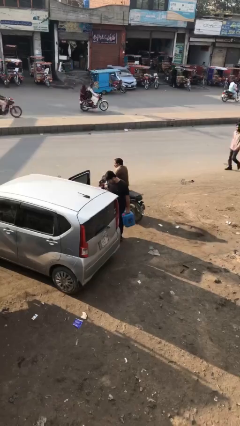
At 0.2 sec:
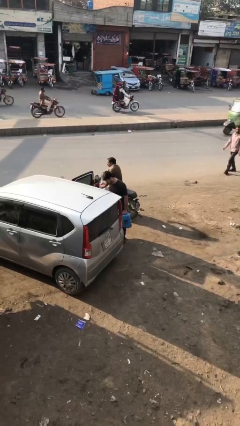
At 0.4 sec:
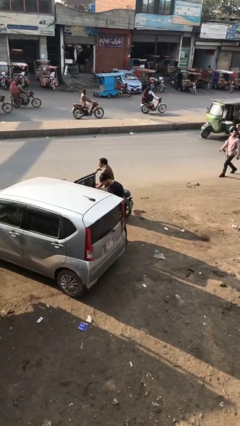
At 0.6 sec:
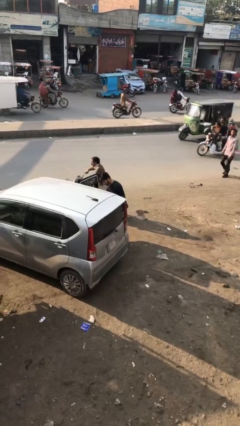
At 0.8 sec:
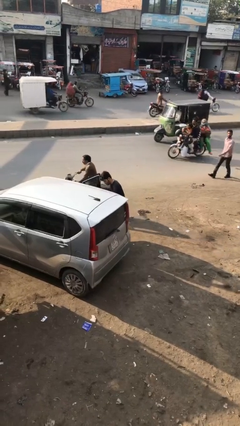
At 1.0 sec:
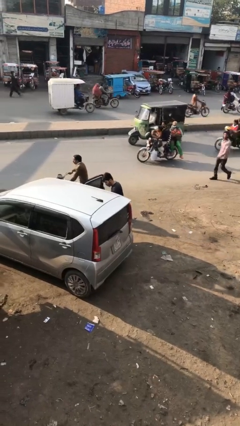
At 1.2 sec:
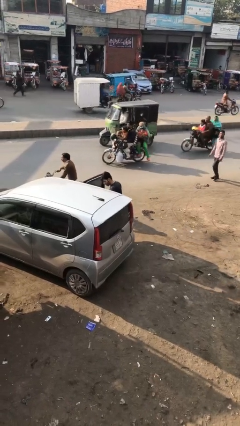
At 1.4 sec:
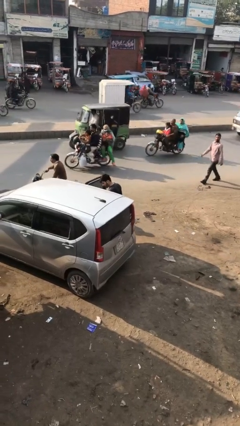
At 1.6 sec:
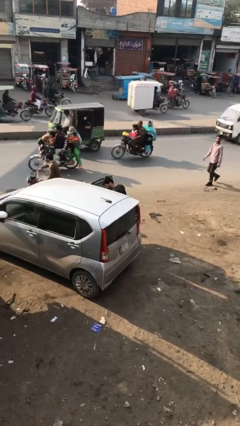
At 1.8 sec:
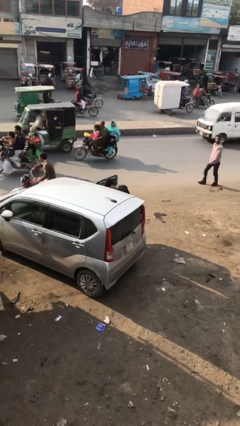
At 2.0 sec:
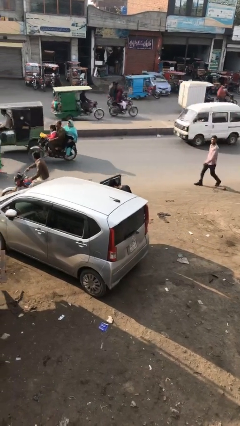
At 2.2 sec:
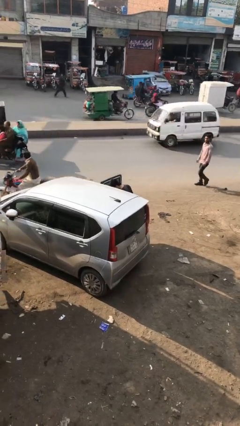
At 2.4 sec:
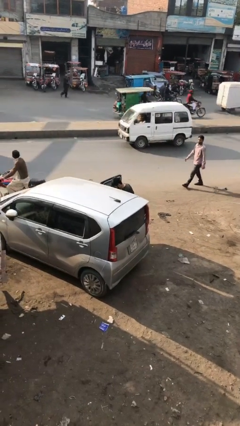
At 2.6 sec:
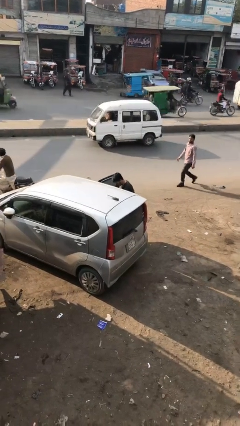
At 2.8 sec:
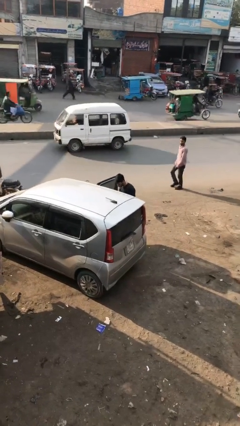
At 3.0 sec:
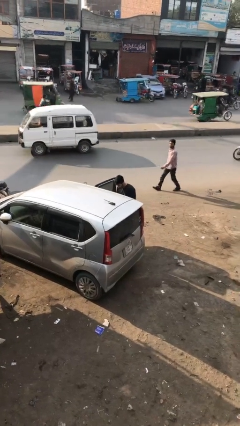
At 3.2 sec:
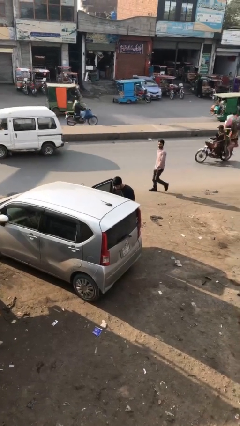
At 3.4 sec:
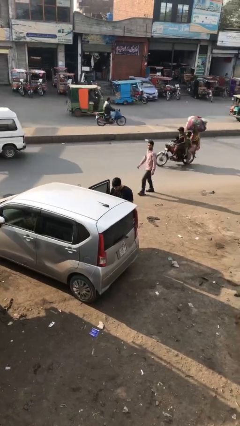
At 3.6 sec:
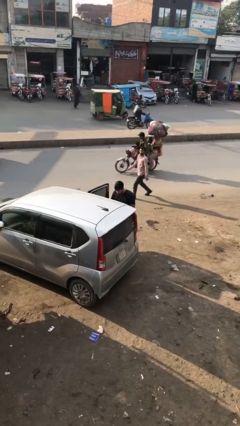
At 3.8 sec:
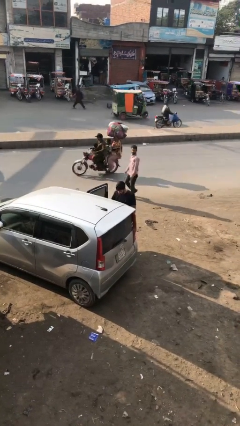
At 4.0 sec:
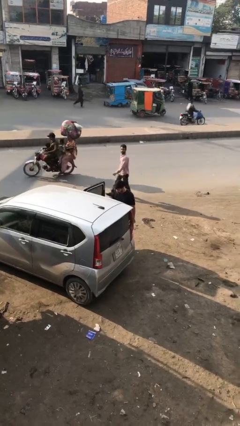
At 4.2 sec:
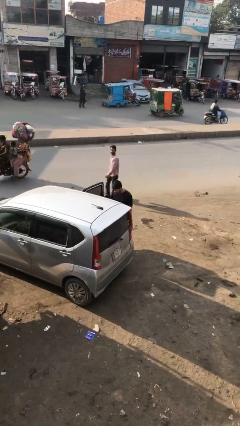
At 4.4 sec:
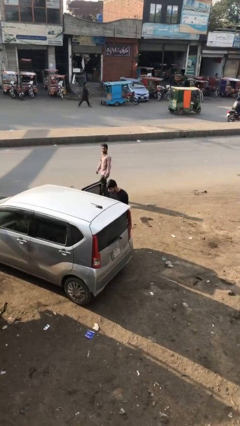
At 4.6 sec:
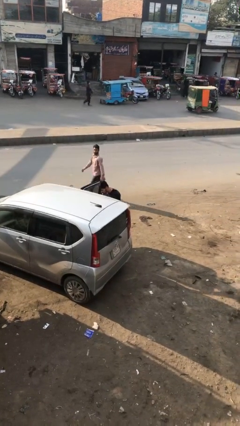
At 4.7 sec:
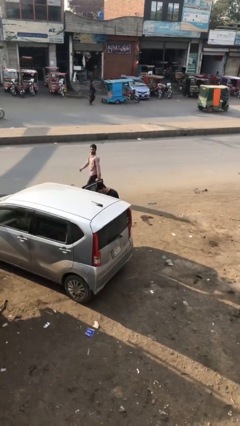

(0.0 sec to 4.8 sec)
person loads car

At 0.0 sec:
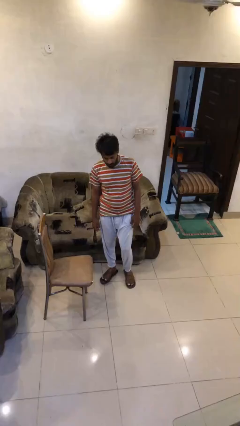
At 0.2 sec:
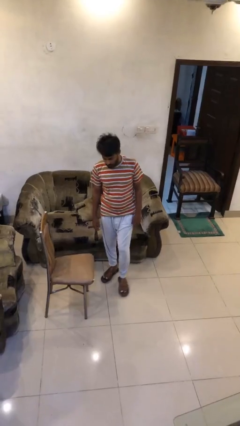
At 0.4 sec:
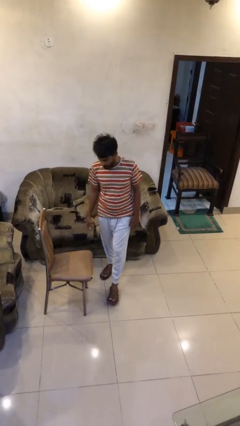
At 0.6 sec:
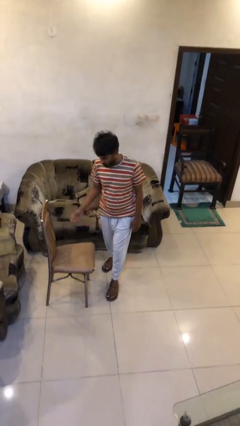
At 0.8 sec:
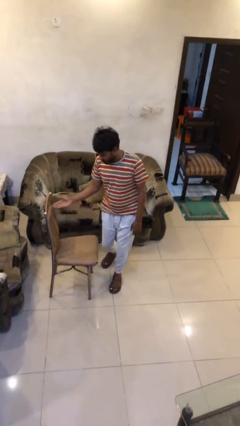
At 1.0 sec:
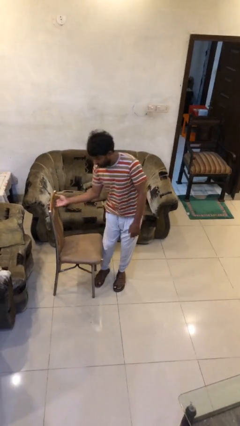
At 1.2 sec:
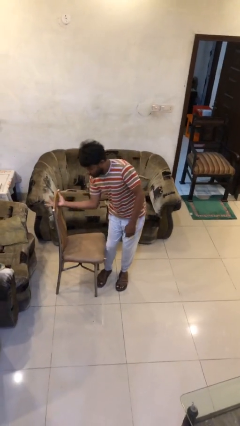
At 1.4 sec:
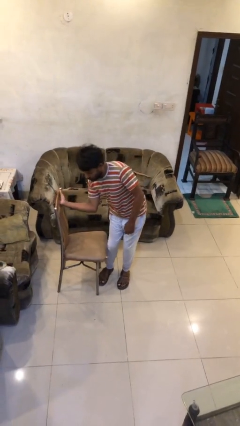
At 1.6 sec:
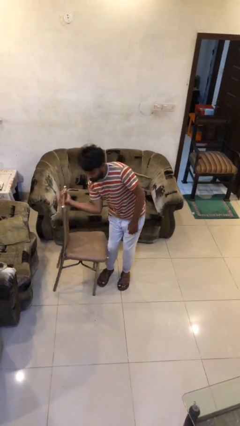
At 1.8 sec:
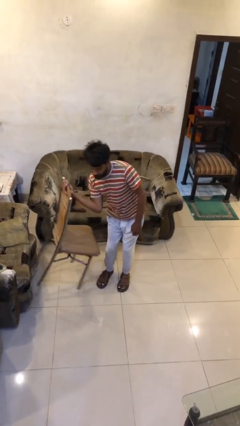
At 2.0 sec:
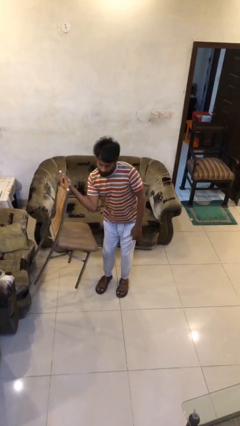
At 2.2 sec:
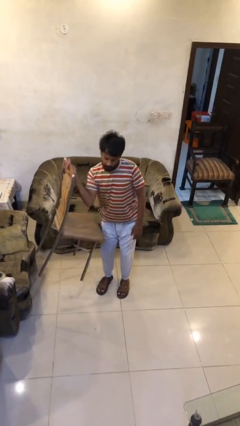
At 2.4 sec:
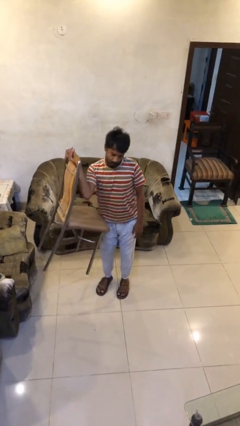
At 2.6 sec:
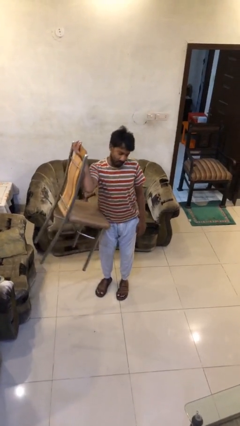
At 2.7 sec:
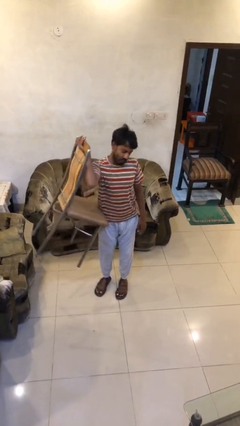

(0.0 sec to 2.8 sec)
person picks up object from floor

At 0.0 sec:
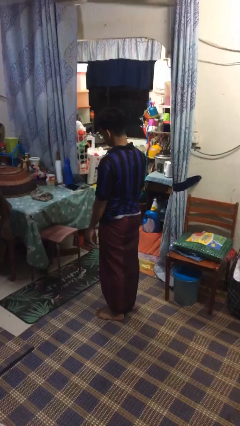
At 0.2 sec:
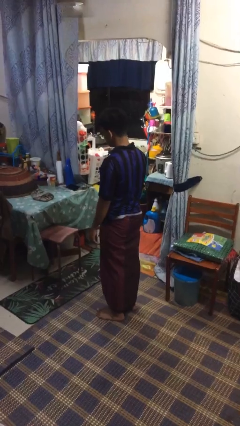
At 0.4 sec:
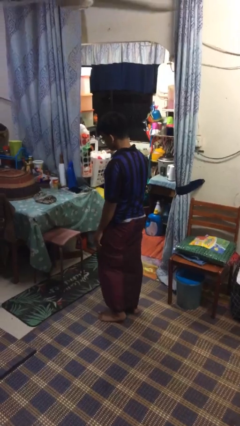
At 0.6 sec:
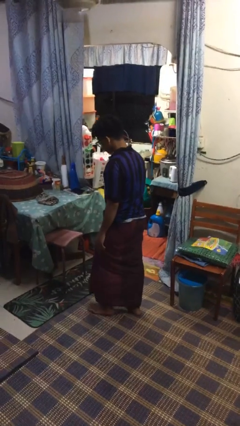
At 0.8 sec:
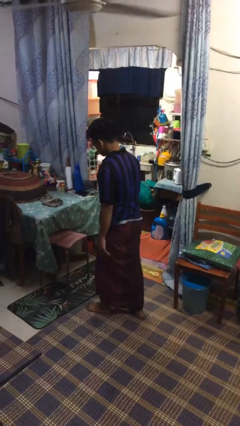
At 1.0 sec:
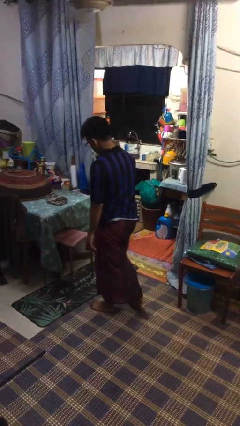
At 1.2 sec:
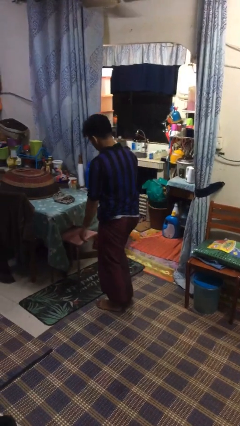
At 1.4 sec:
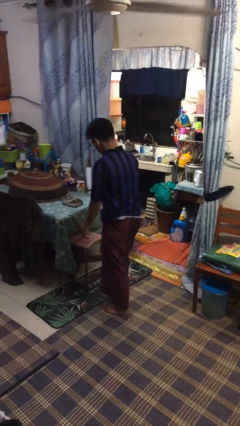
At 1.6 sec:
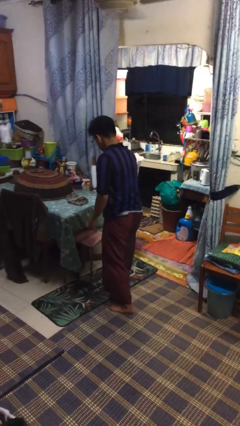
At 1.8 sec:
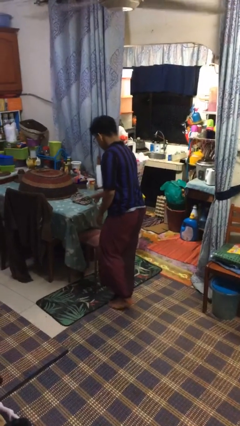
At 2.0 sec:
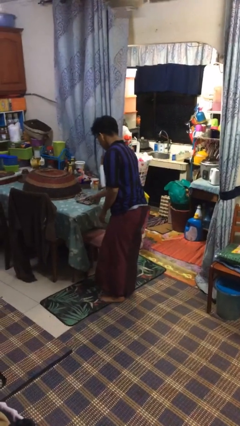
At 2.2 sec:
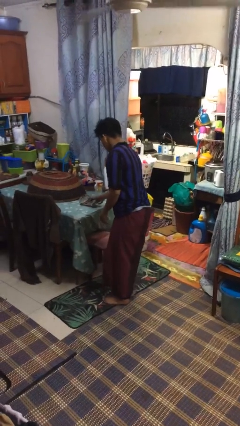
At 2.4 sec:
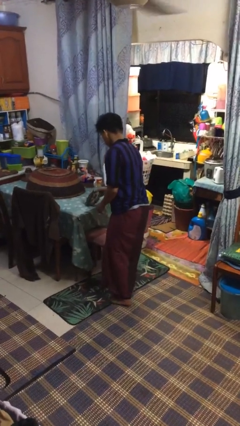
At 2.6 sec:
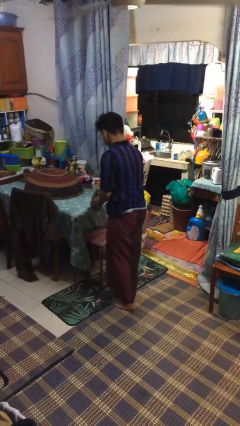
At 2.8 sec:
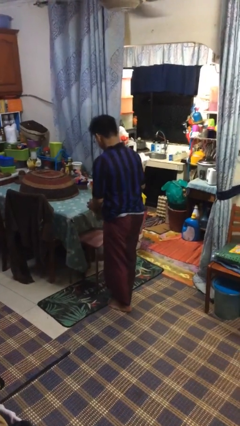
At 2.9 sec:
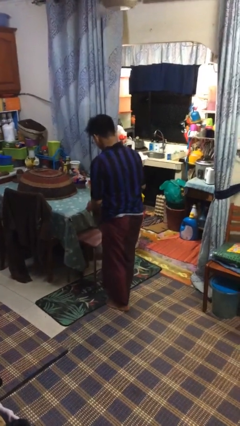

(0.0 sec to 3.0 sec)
person picks up object from table

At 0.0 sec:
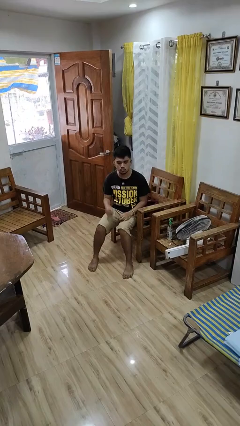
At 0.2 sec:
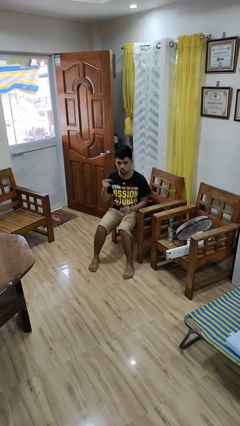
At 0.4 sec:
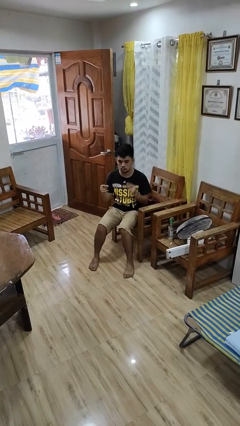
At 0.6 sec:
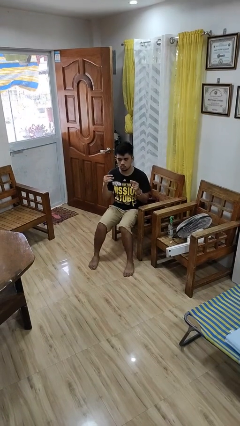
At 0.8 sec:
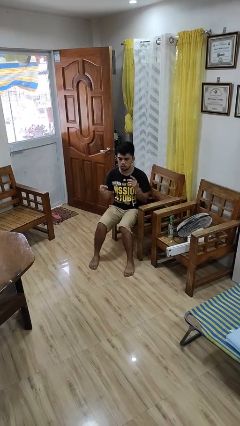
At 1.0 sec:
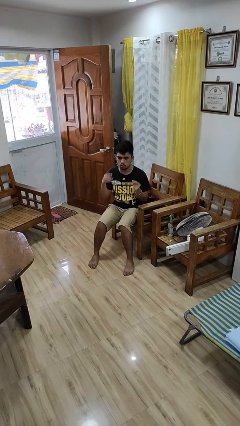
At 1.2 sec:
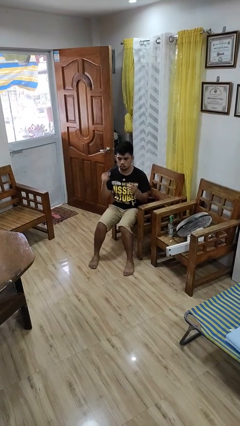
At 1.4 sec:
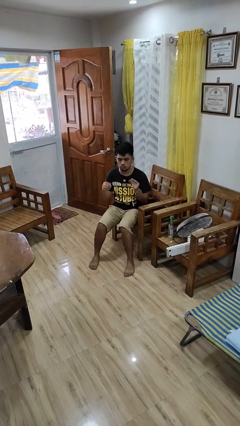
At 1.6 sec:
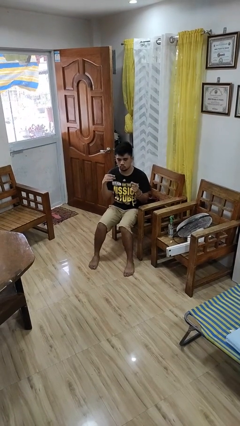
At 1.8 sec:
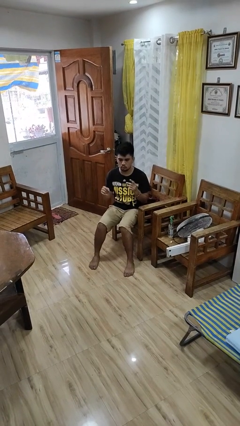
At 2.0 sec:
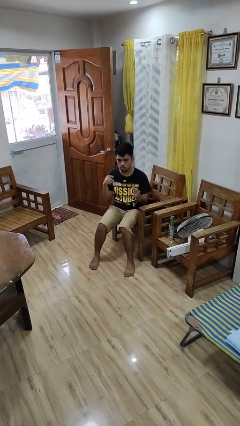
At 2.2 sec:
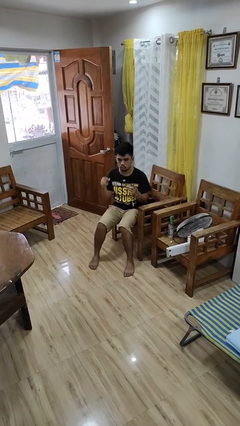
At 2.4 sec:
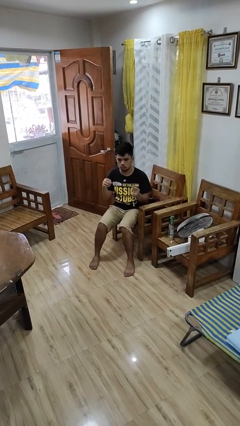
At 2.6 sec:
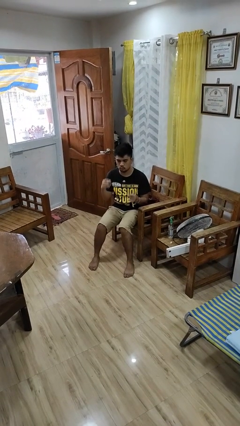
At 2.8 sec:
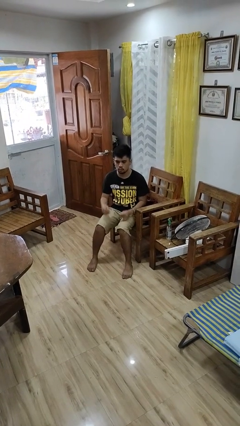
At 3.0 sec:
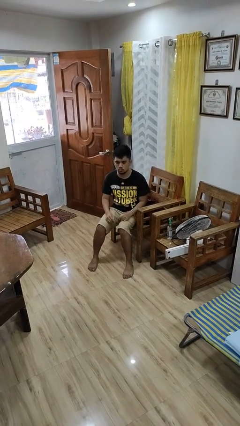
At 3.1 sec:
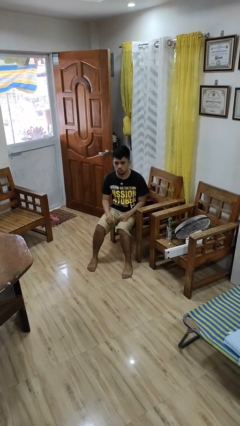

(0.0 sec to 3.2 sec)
person snaps fingers

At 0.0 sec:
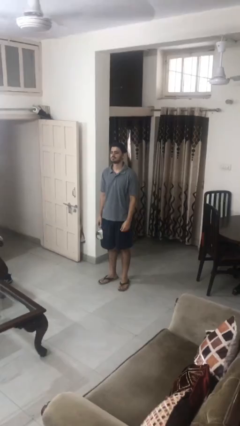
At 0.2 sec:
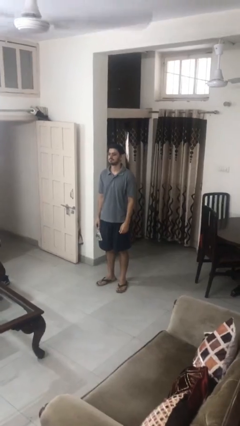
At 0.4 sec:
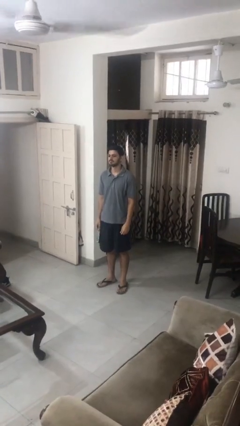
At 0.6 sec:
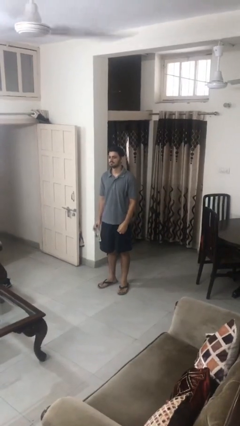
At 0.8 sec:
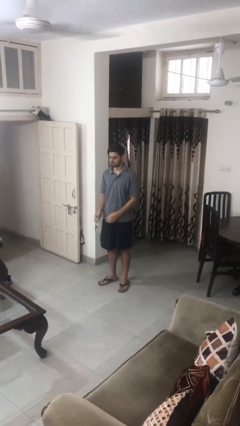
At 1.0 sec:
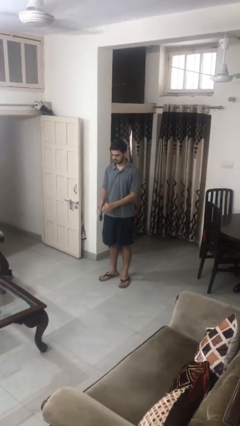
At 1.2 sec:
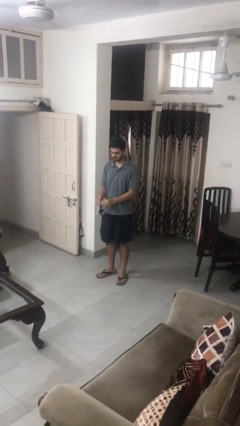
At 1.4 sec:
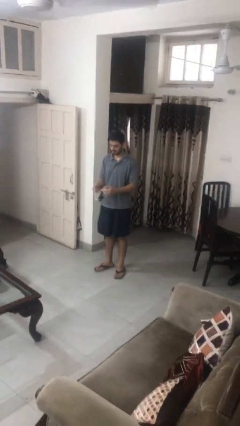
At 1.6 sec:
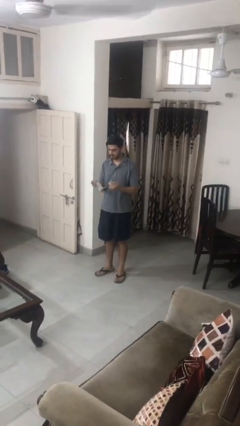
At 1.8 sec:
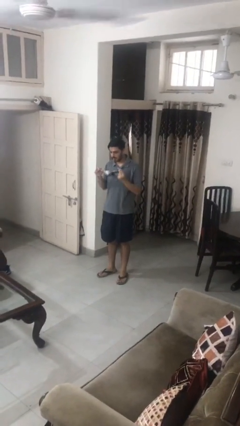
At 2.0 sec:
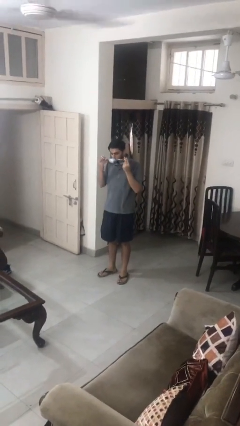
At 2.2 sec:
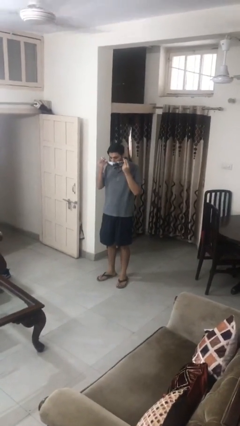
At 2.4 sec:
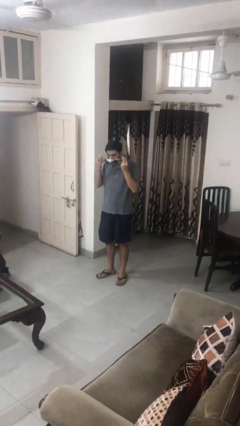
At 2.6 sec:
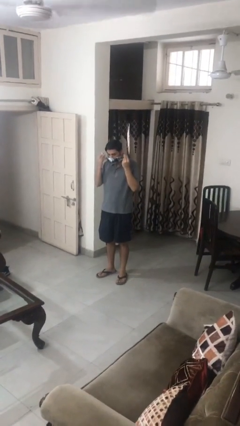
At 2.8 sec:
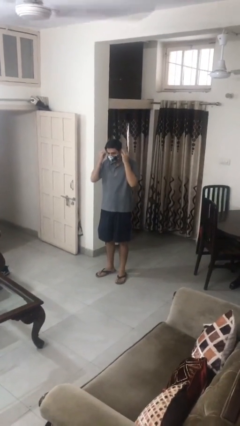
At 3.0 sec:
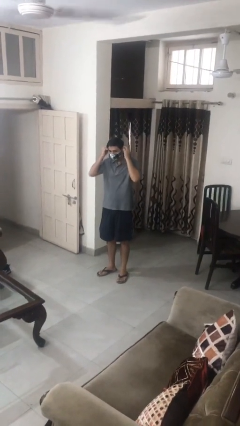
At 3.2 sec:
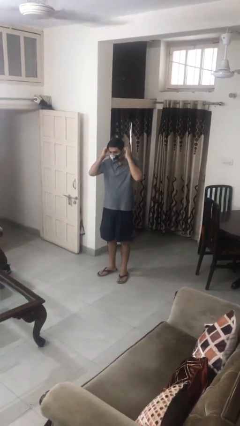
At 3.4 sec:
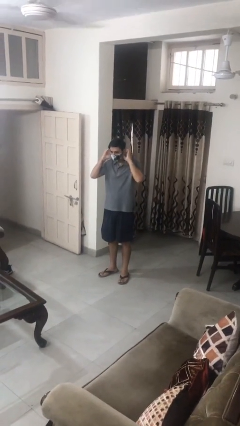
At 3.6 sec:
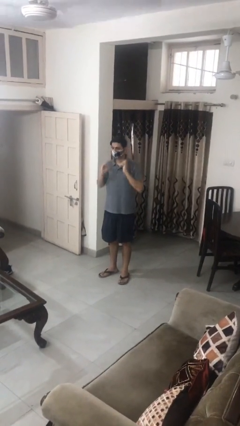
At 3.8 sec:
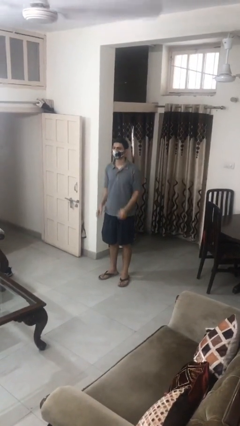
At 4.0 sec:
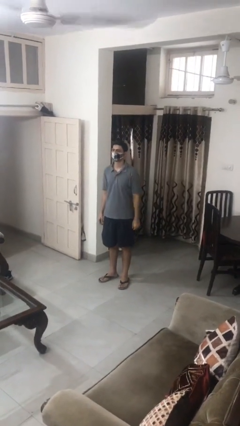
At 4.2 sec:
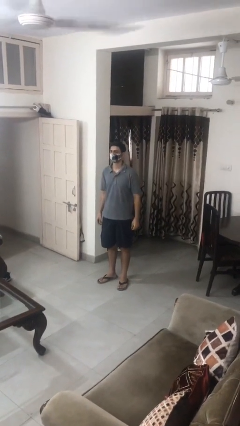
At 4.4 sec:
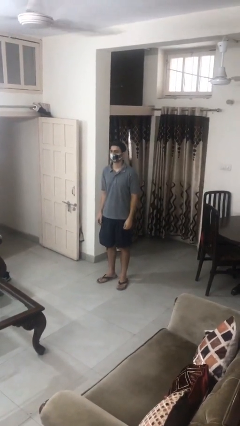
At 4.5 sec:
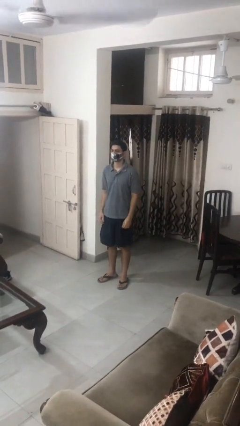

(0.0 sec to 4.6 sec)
person puts on facemask
